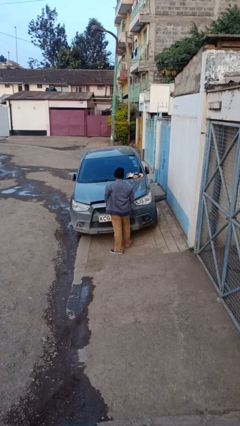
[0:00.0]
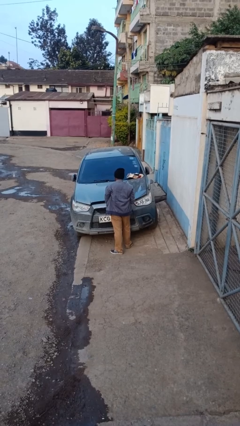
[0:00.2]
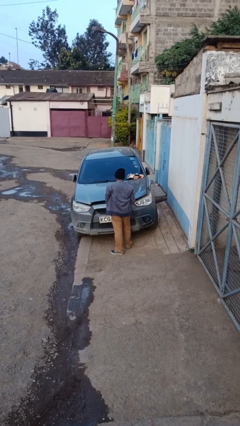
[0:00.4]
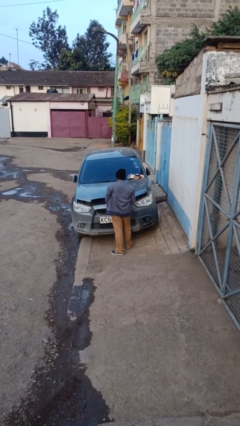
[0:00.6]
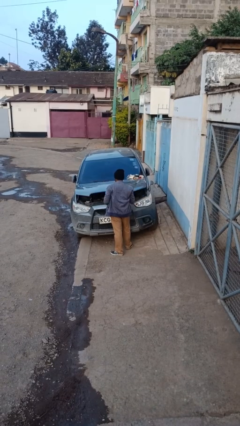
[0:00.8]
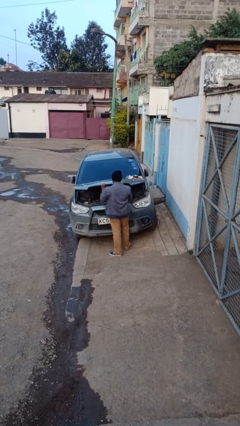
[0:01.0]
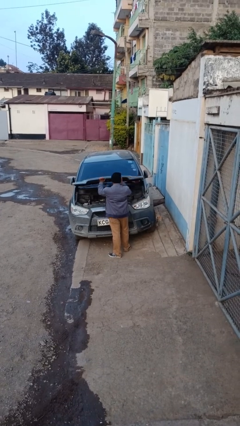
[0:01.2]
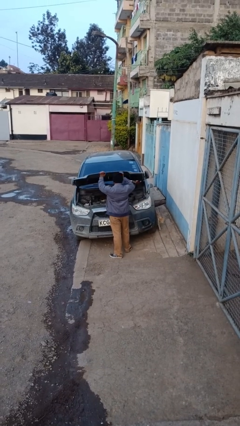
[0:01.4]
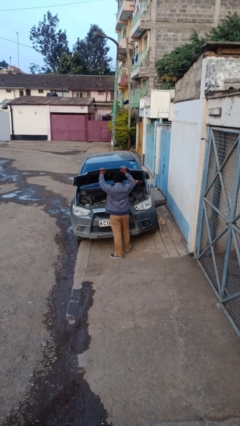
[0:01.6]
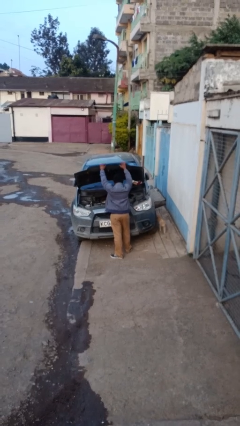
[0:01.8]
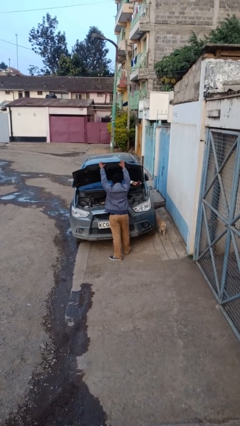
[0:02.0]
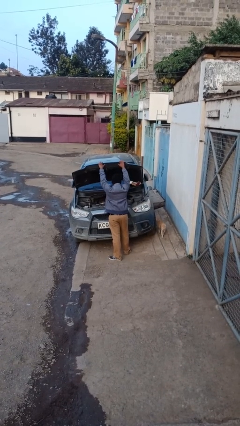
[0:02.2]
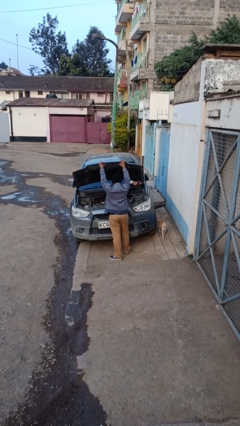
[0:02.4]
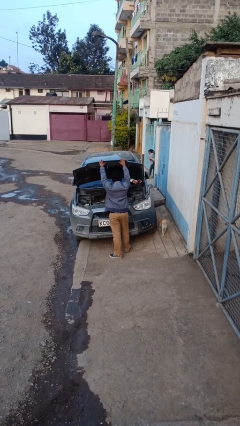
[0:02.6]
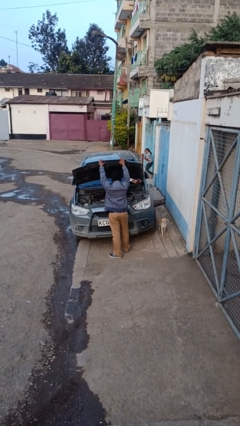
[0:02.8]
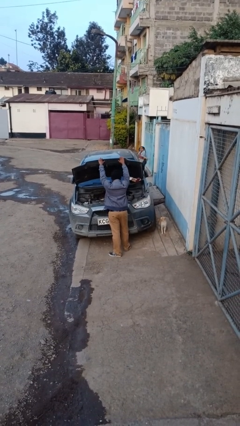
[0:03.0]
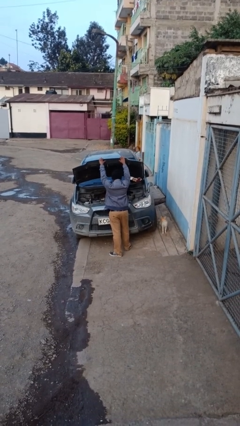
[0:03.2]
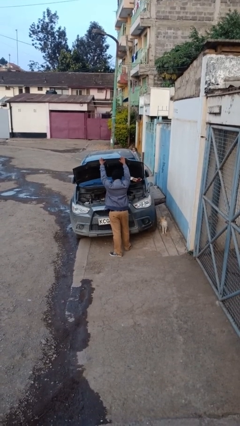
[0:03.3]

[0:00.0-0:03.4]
person opens car hood

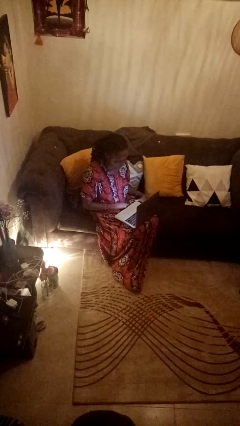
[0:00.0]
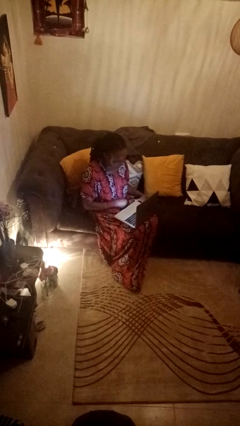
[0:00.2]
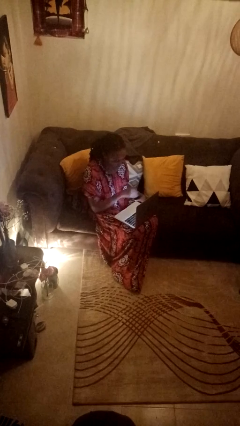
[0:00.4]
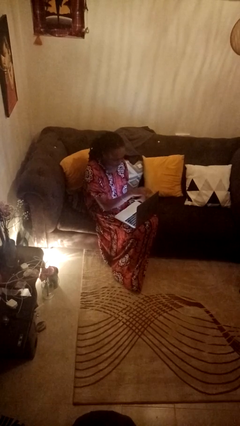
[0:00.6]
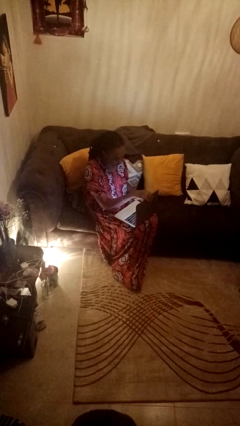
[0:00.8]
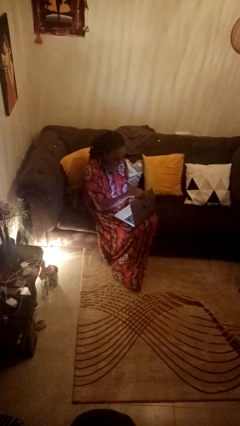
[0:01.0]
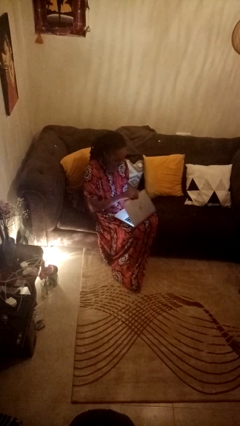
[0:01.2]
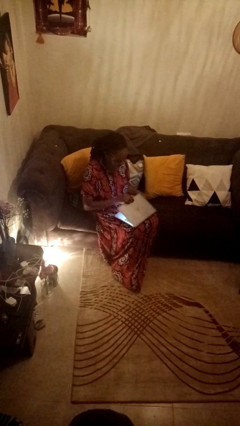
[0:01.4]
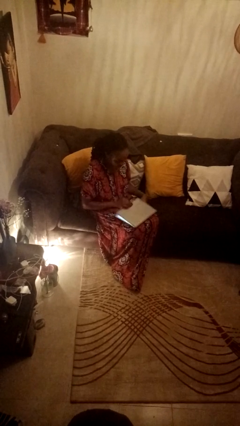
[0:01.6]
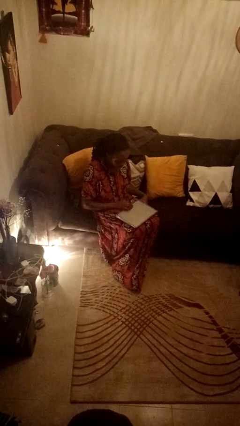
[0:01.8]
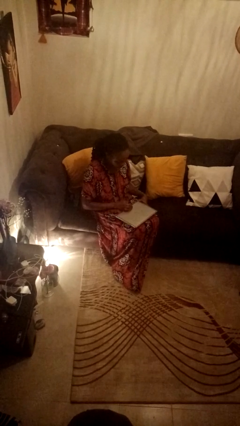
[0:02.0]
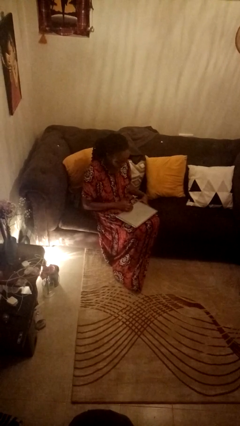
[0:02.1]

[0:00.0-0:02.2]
person closes laptop

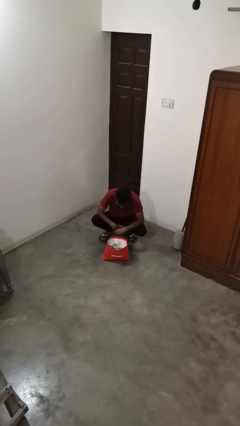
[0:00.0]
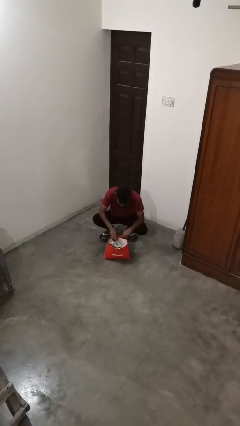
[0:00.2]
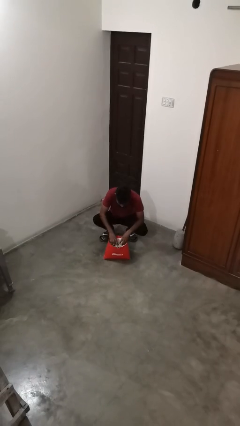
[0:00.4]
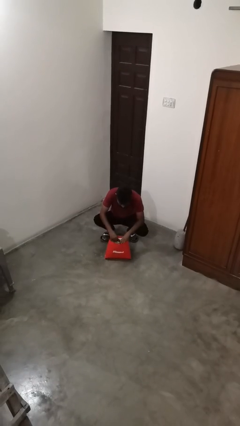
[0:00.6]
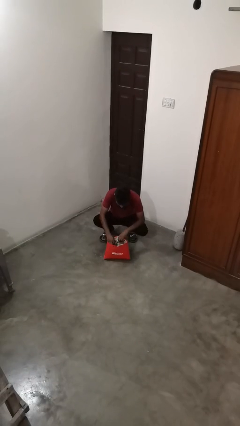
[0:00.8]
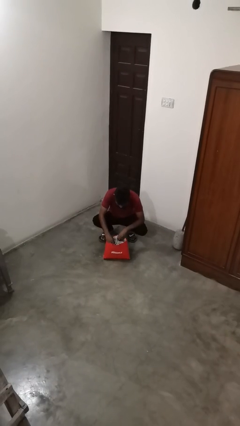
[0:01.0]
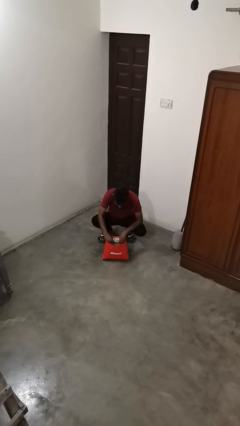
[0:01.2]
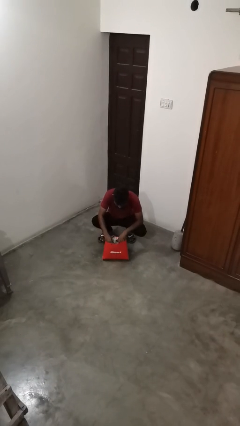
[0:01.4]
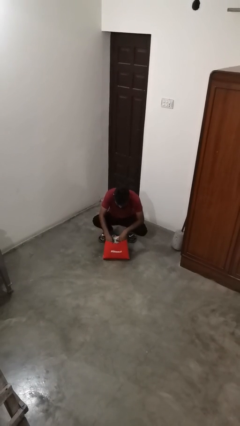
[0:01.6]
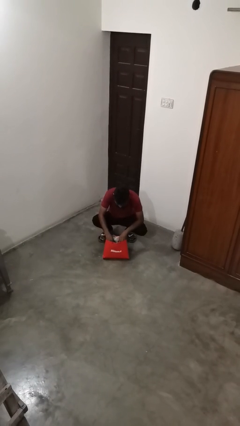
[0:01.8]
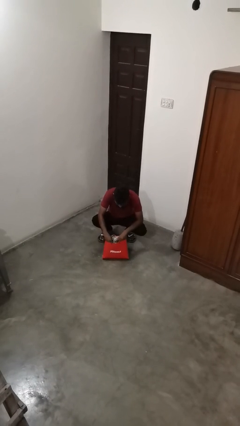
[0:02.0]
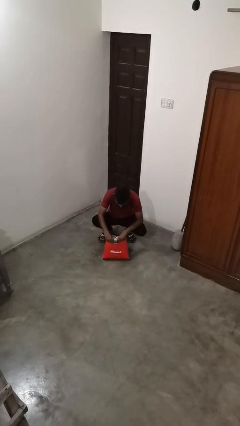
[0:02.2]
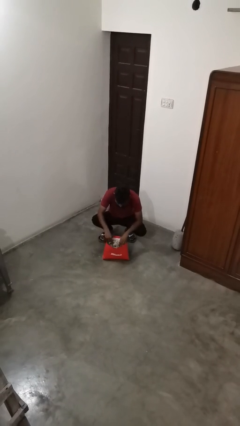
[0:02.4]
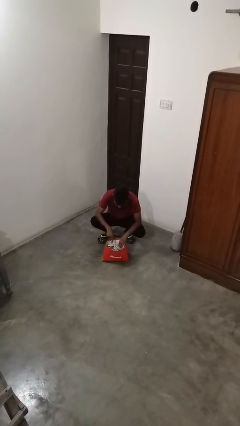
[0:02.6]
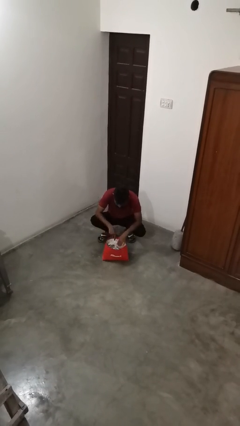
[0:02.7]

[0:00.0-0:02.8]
person searches in bag

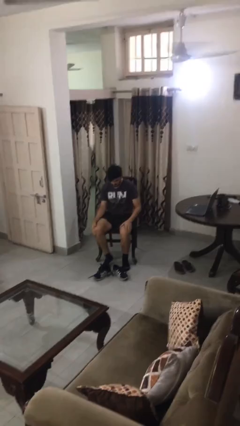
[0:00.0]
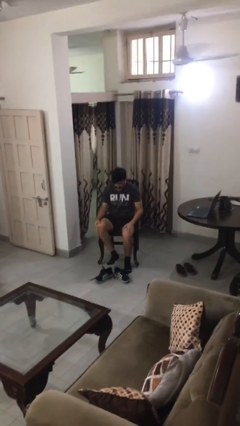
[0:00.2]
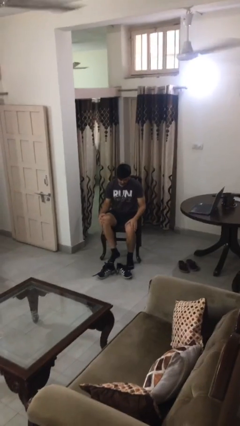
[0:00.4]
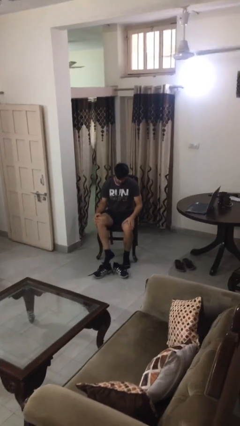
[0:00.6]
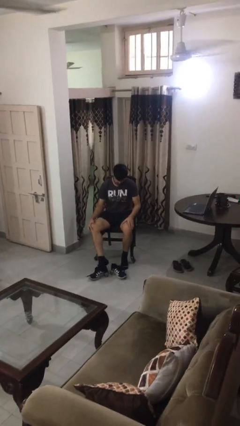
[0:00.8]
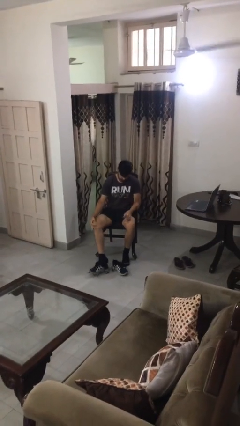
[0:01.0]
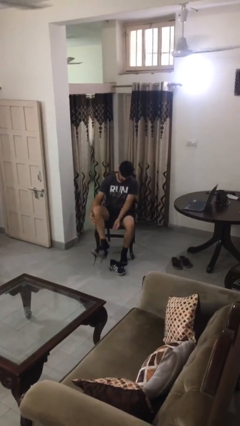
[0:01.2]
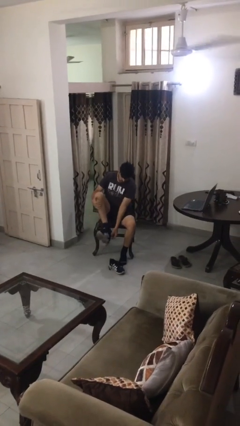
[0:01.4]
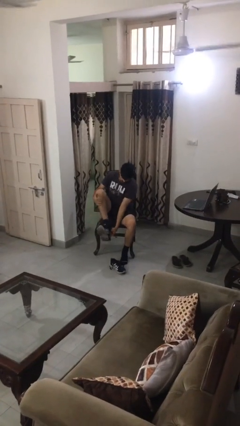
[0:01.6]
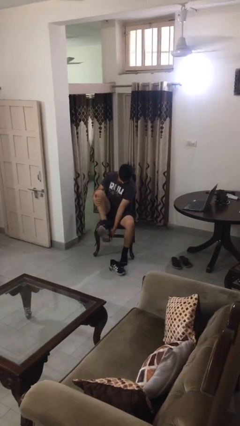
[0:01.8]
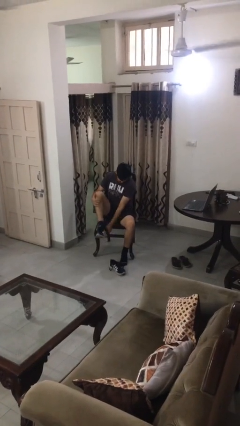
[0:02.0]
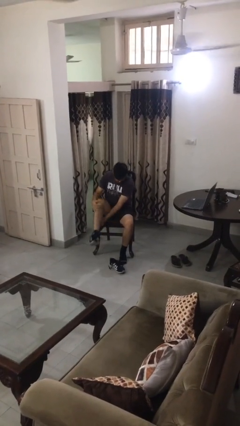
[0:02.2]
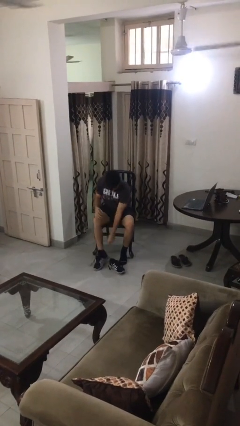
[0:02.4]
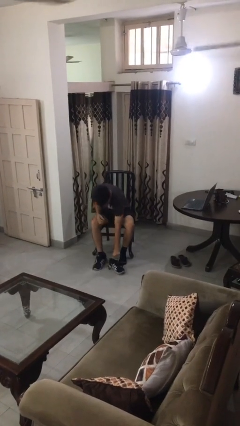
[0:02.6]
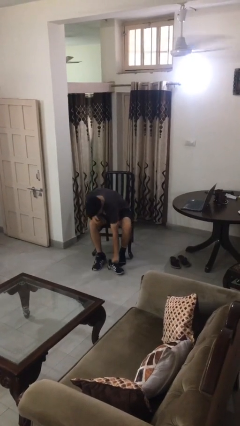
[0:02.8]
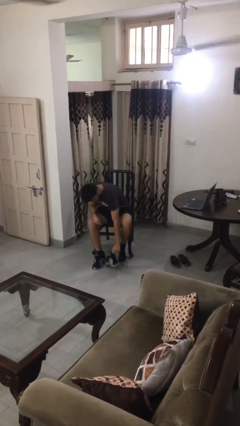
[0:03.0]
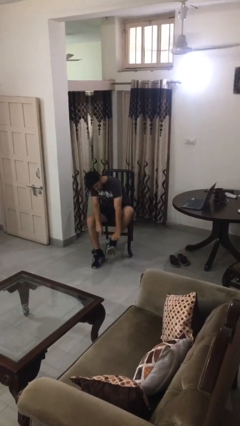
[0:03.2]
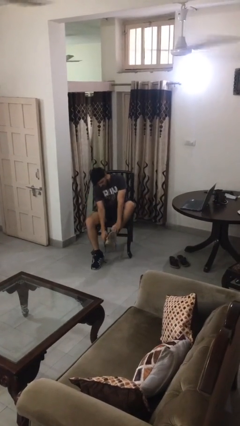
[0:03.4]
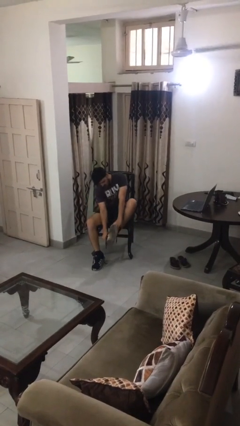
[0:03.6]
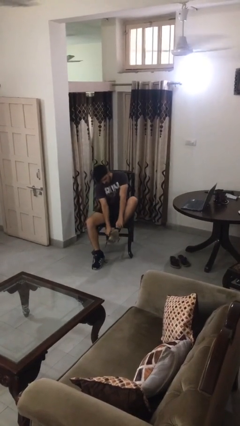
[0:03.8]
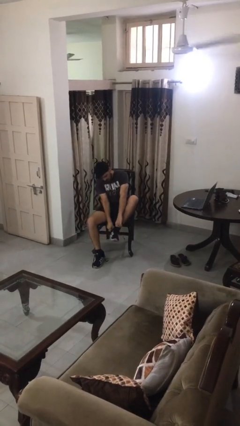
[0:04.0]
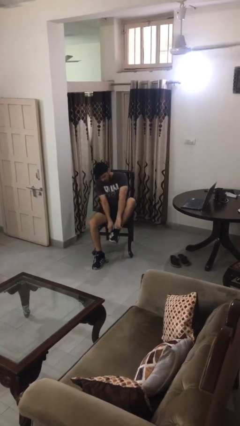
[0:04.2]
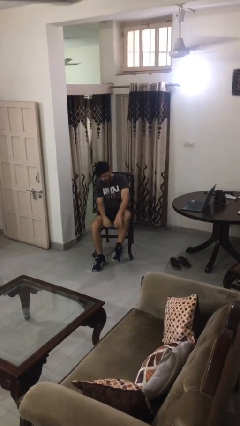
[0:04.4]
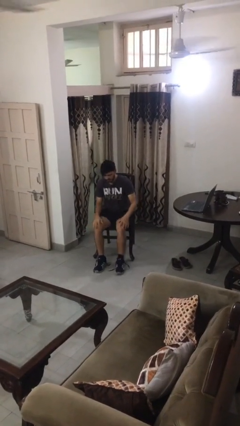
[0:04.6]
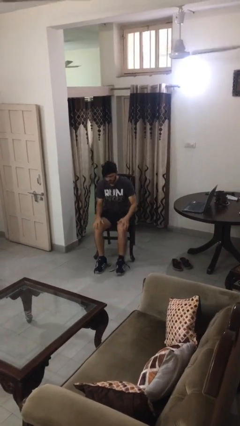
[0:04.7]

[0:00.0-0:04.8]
person puts on shoes

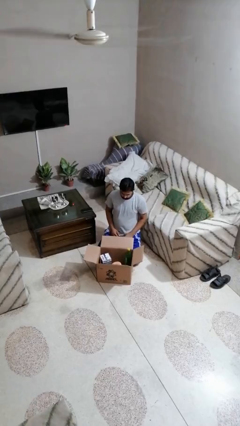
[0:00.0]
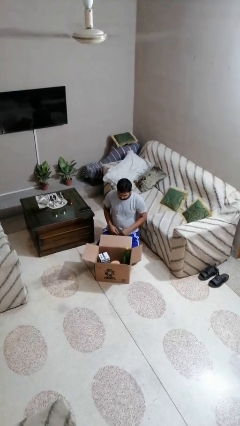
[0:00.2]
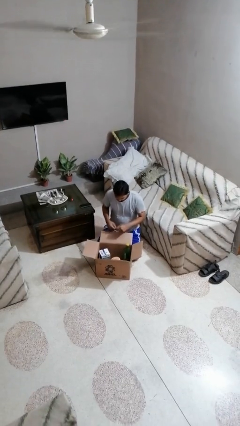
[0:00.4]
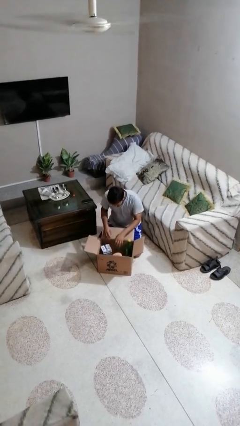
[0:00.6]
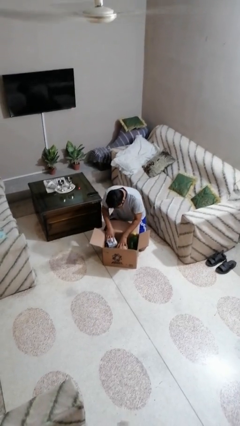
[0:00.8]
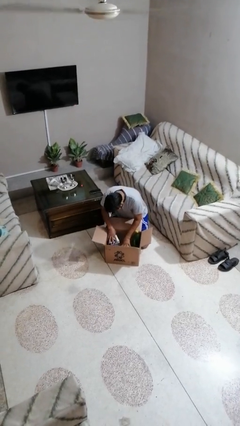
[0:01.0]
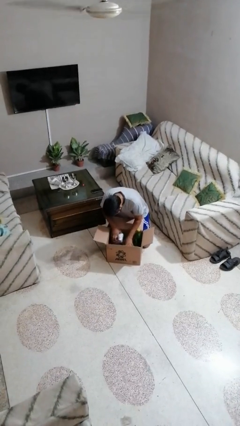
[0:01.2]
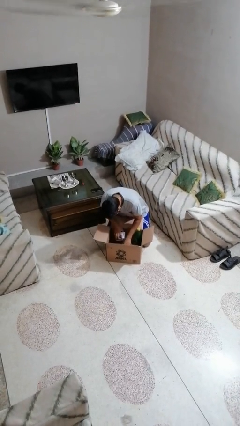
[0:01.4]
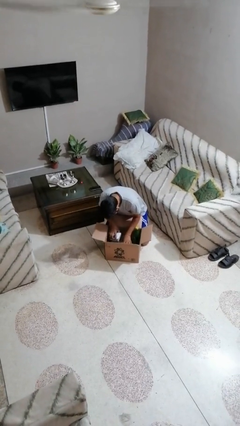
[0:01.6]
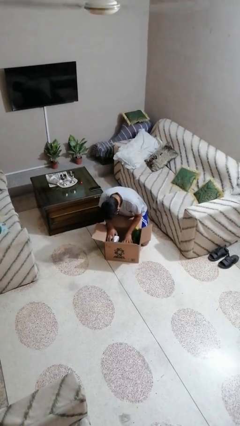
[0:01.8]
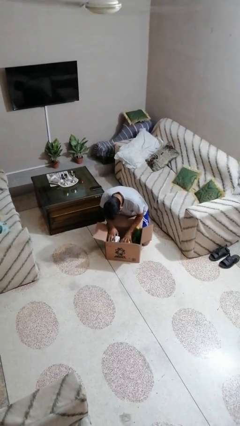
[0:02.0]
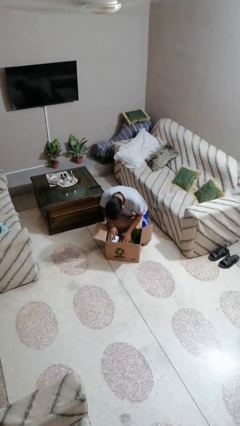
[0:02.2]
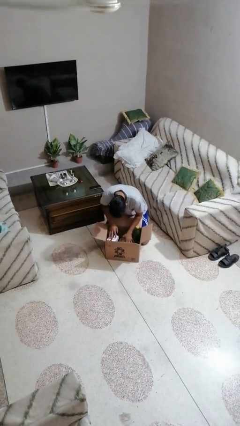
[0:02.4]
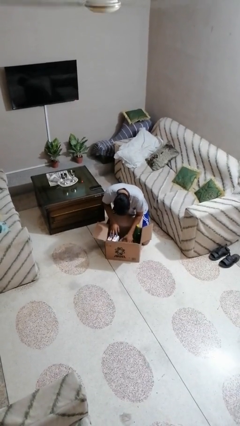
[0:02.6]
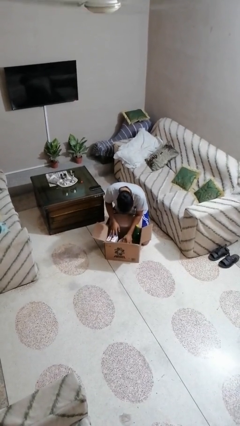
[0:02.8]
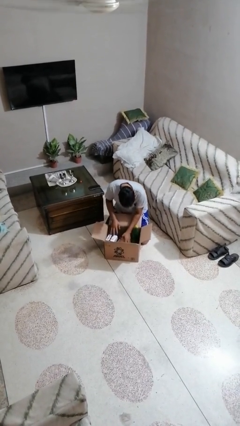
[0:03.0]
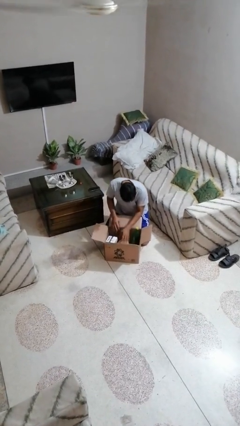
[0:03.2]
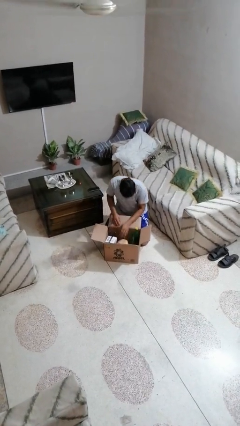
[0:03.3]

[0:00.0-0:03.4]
person searches in box

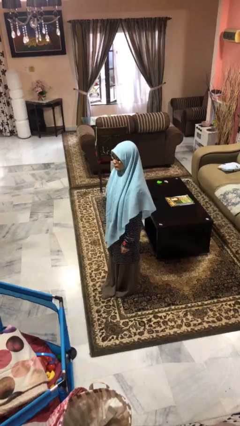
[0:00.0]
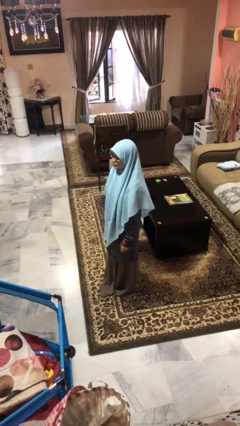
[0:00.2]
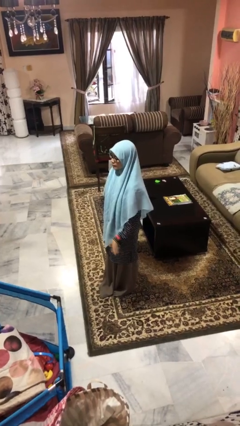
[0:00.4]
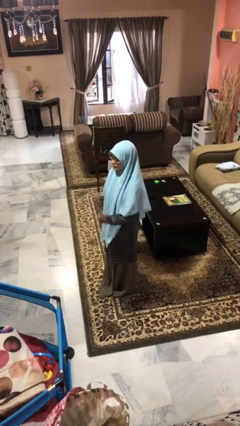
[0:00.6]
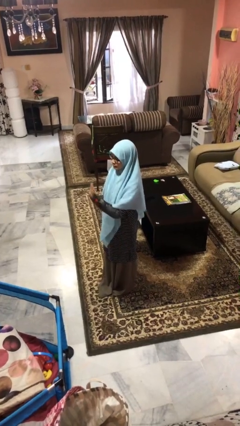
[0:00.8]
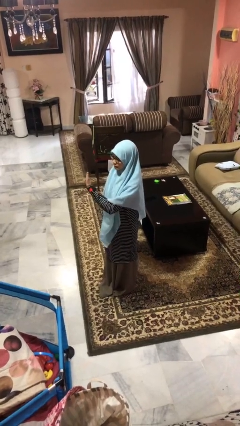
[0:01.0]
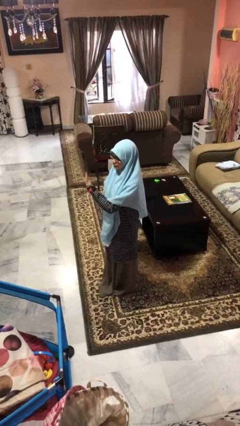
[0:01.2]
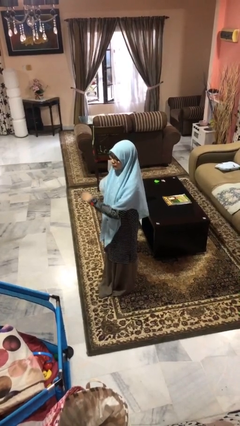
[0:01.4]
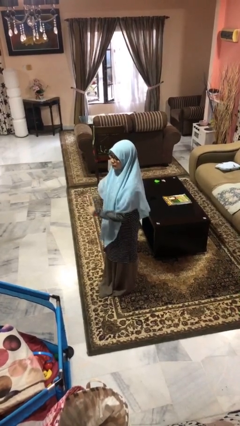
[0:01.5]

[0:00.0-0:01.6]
person gestures swipe right
